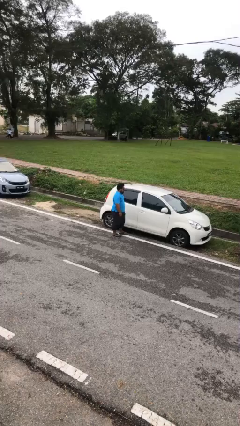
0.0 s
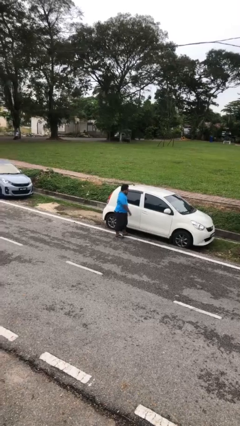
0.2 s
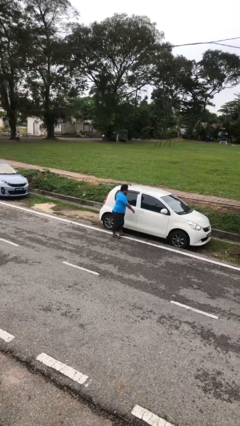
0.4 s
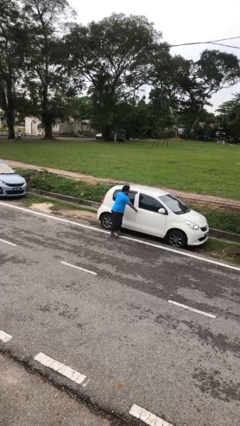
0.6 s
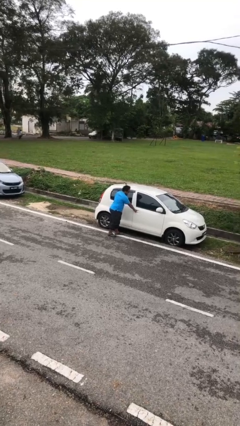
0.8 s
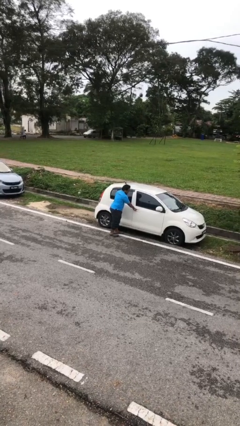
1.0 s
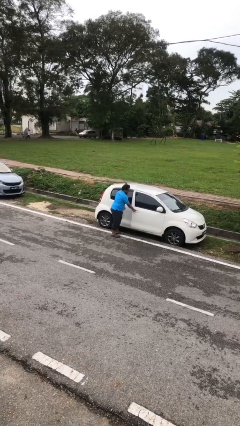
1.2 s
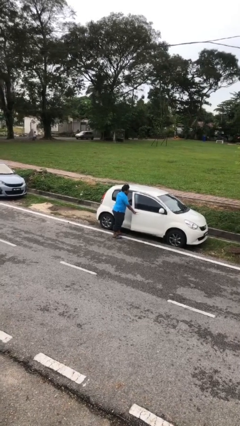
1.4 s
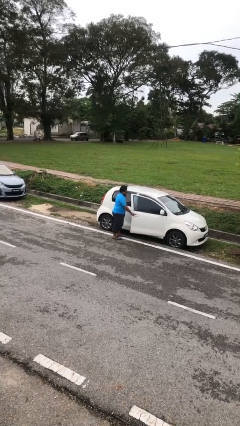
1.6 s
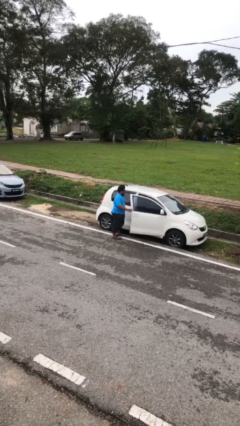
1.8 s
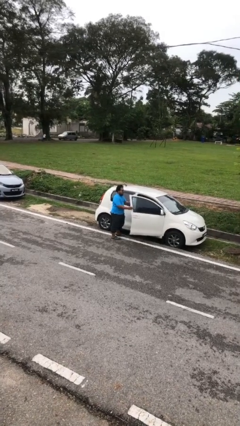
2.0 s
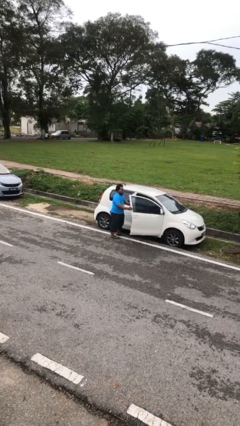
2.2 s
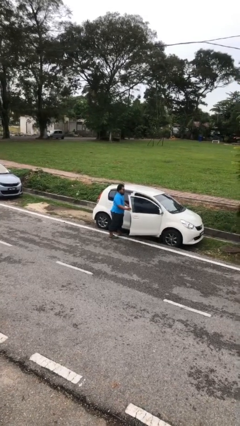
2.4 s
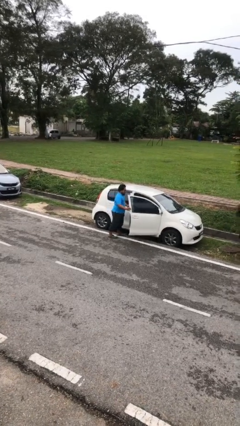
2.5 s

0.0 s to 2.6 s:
person opens car door

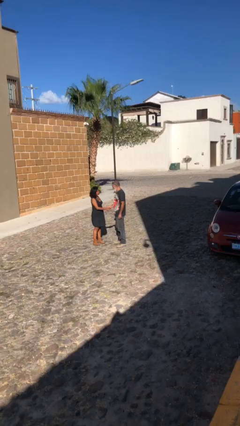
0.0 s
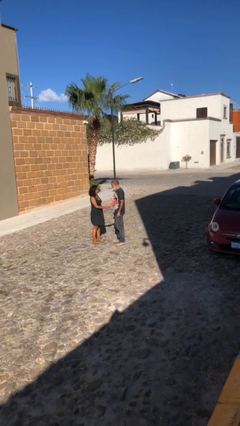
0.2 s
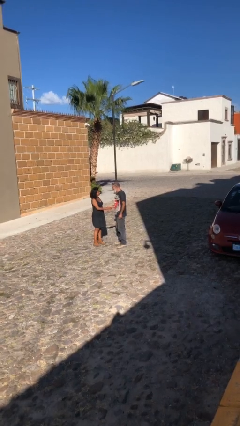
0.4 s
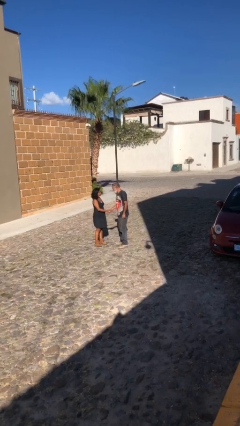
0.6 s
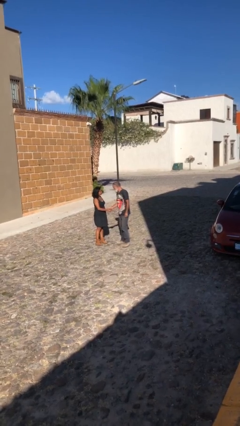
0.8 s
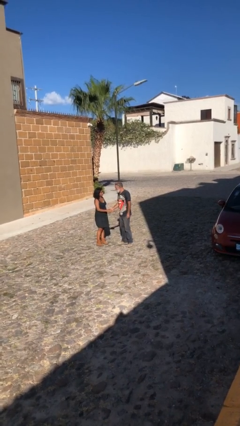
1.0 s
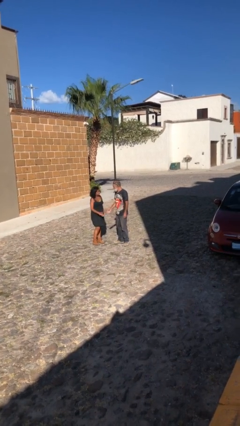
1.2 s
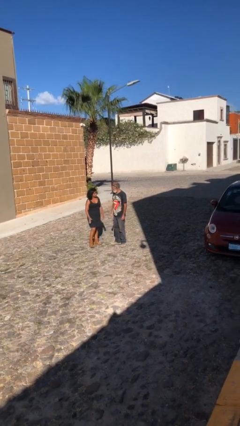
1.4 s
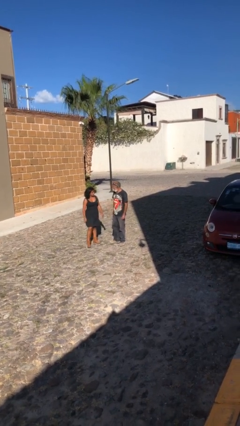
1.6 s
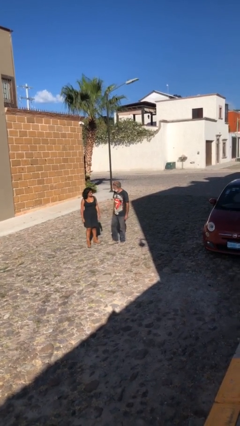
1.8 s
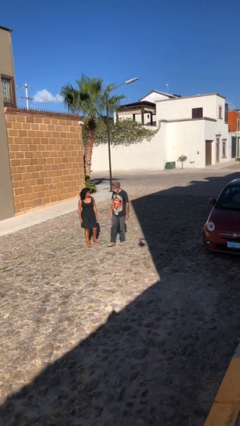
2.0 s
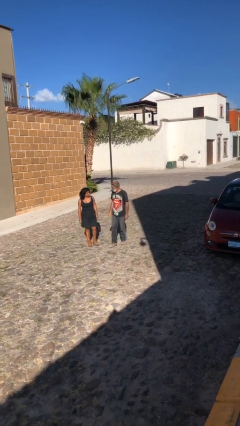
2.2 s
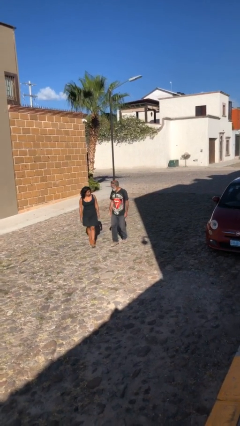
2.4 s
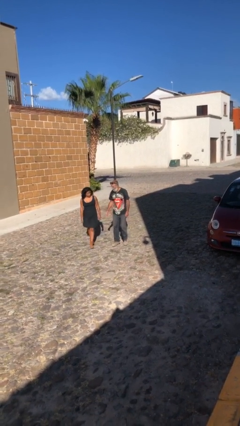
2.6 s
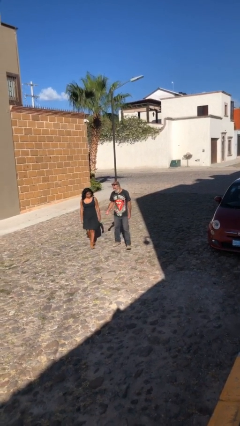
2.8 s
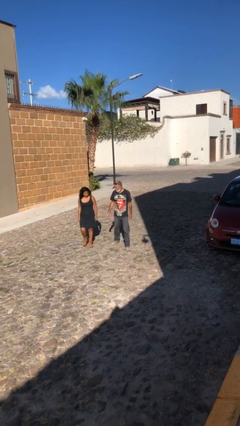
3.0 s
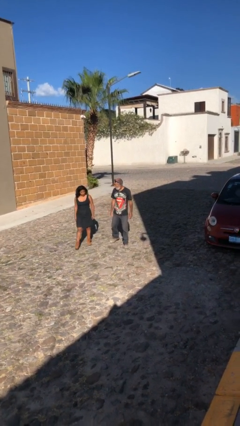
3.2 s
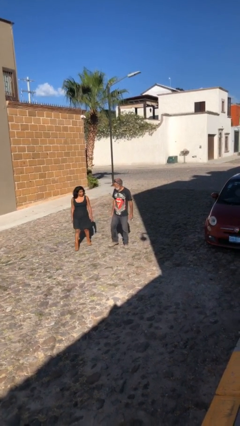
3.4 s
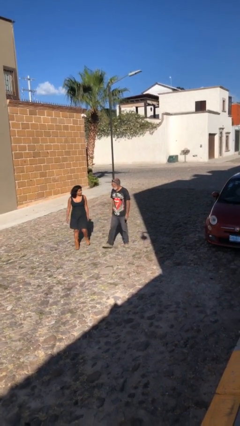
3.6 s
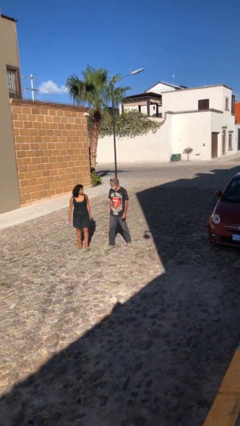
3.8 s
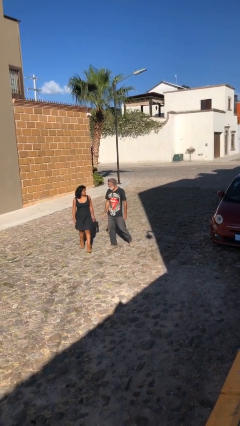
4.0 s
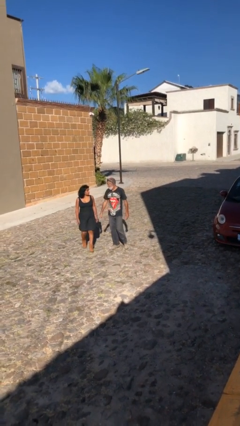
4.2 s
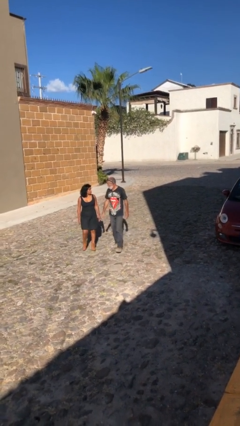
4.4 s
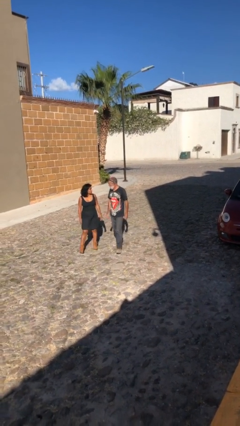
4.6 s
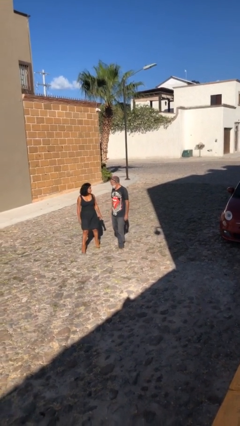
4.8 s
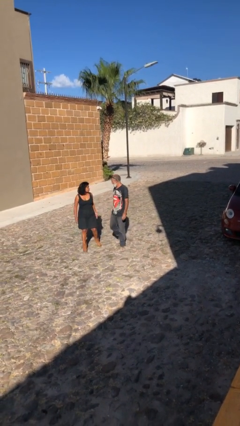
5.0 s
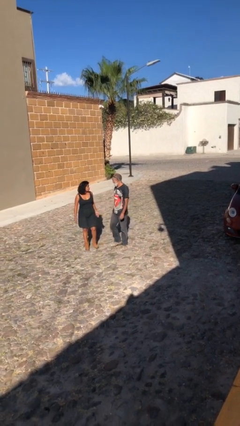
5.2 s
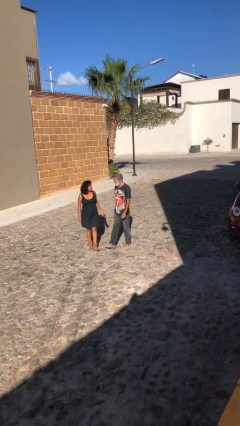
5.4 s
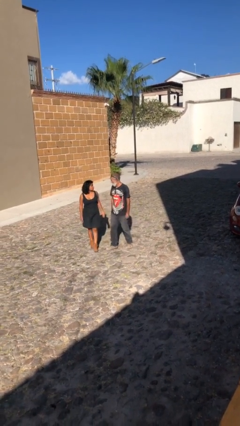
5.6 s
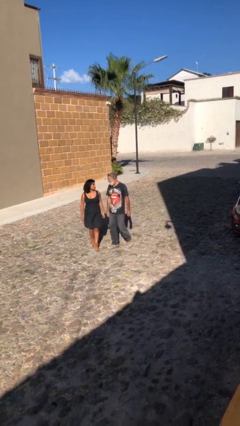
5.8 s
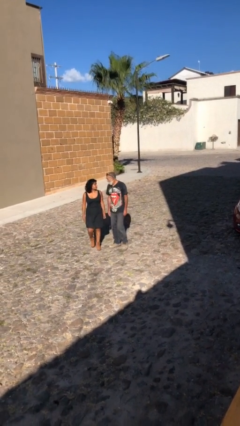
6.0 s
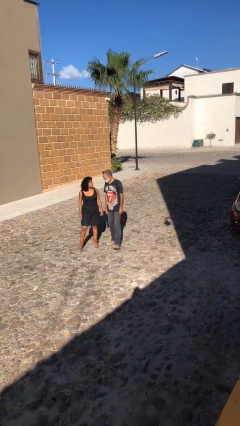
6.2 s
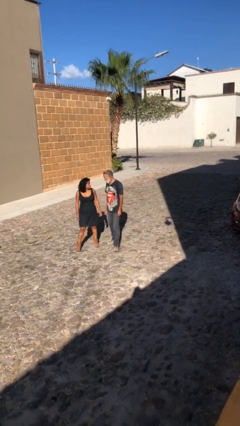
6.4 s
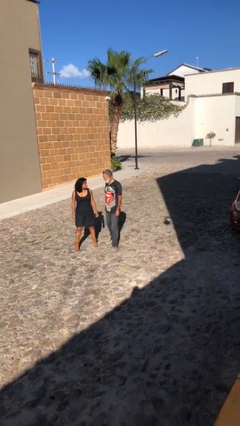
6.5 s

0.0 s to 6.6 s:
person talks to person

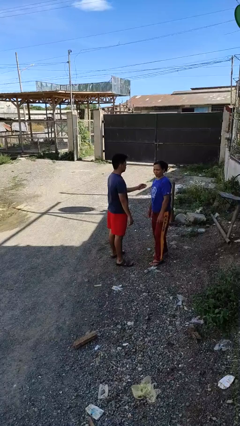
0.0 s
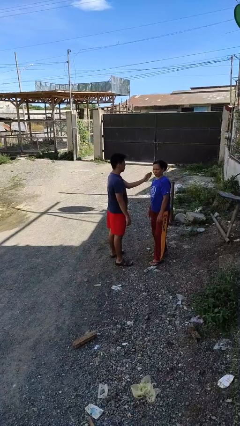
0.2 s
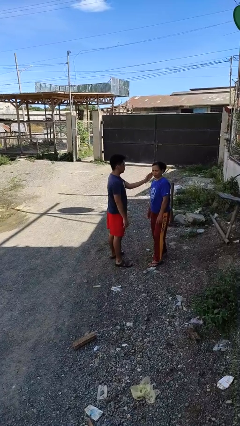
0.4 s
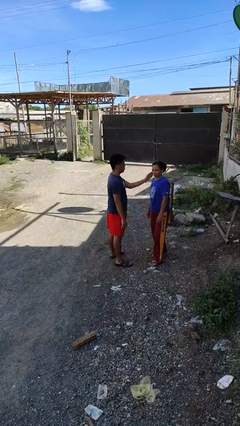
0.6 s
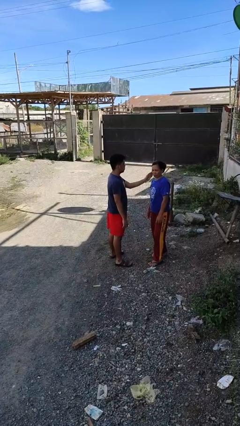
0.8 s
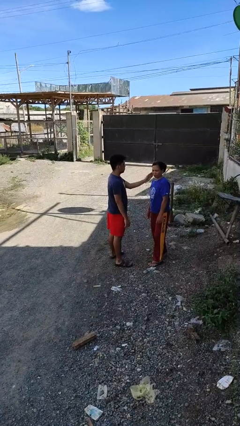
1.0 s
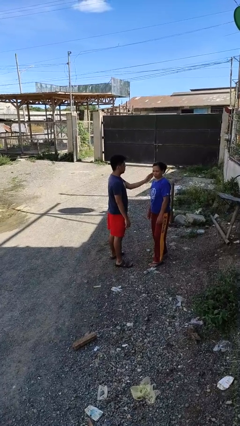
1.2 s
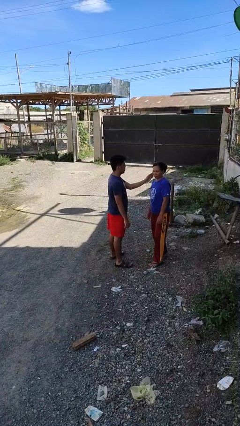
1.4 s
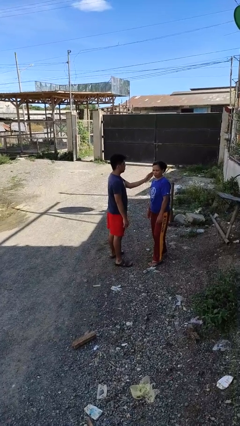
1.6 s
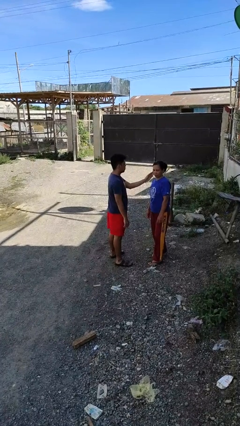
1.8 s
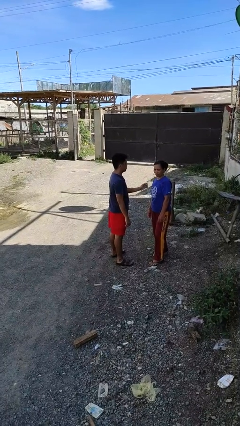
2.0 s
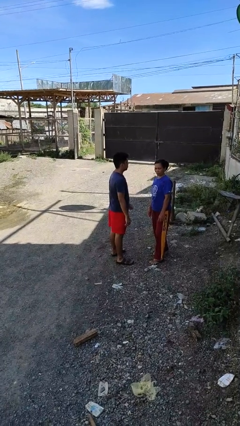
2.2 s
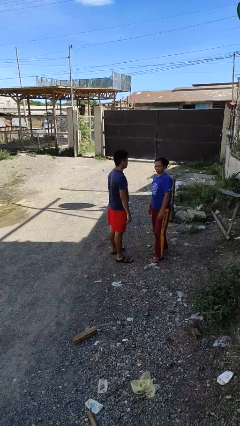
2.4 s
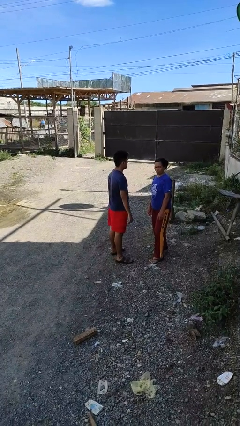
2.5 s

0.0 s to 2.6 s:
person touches face of person

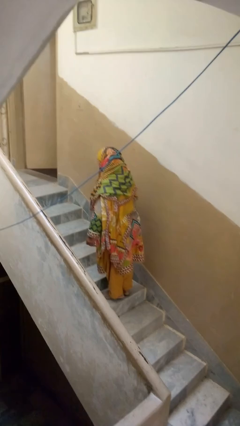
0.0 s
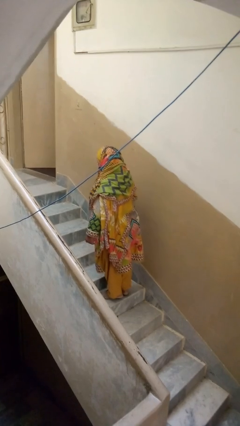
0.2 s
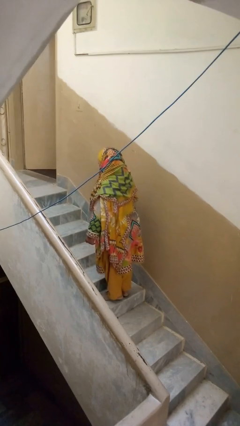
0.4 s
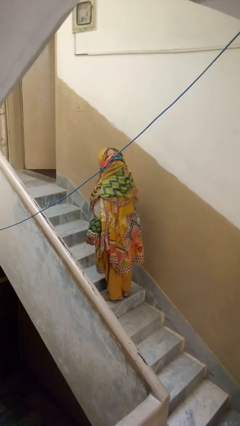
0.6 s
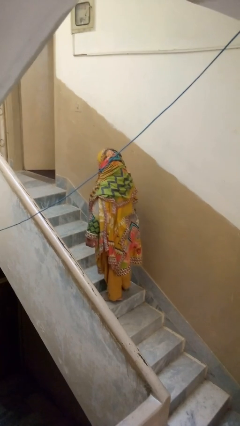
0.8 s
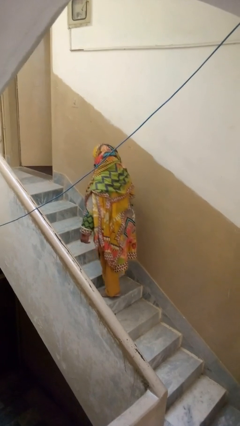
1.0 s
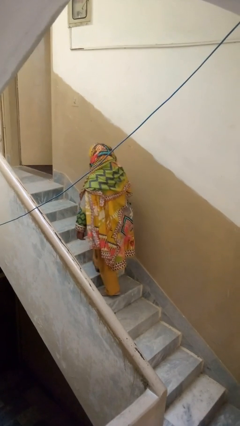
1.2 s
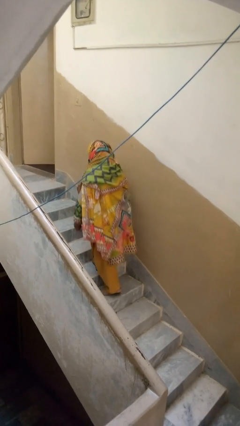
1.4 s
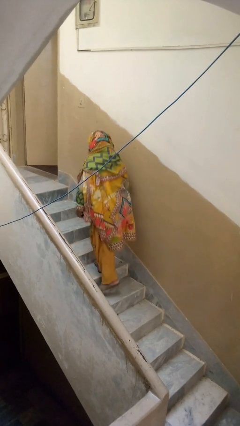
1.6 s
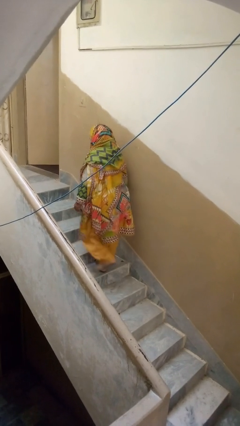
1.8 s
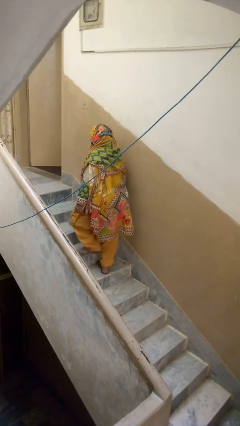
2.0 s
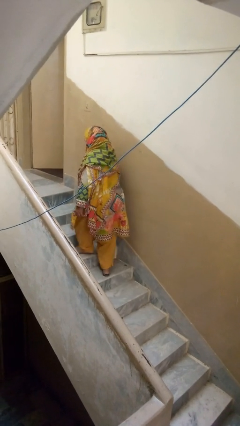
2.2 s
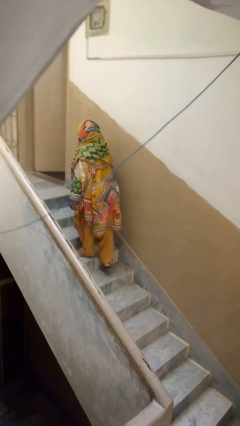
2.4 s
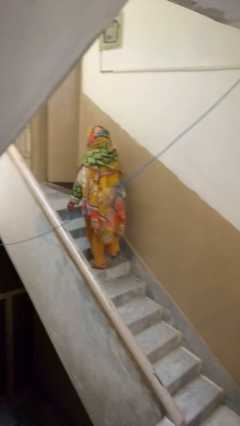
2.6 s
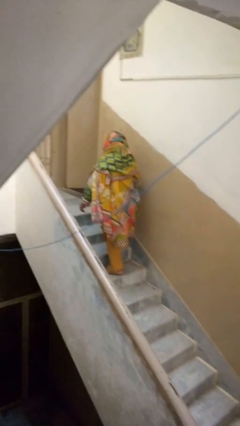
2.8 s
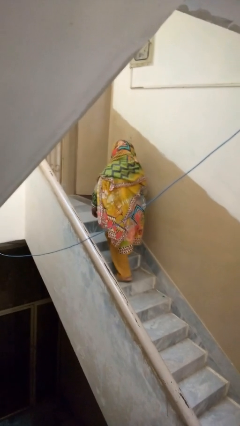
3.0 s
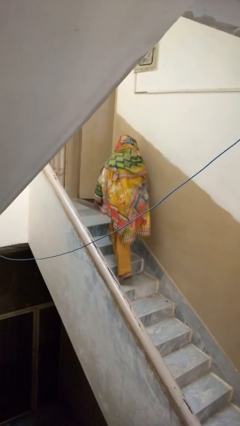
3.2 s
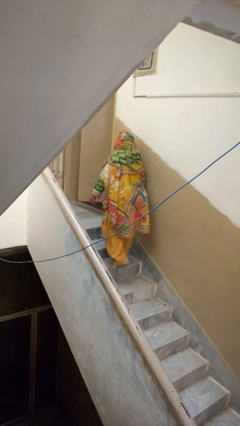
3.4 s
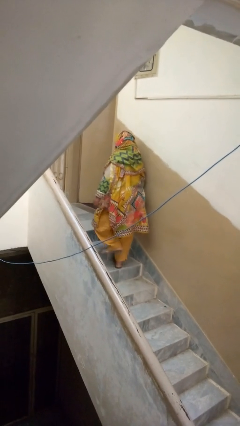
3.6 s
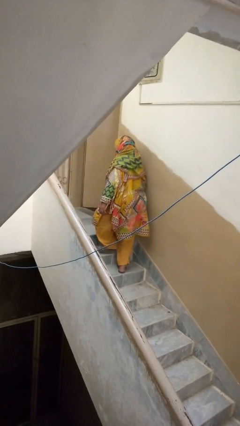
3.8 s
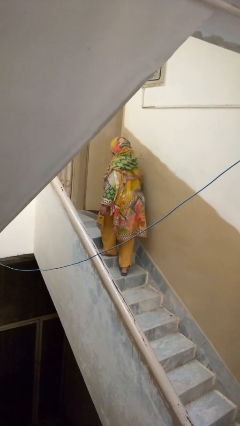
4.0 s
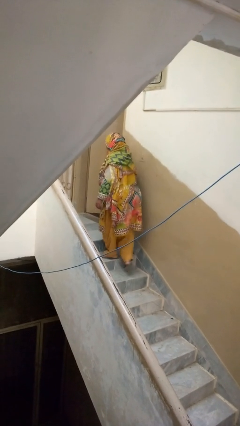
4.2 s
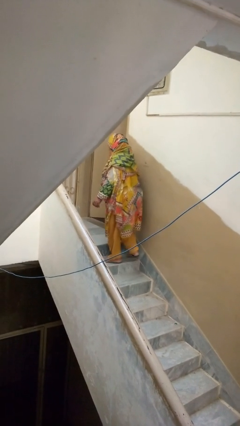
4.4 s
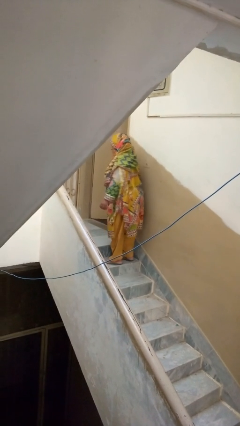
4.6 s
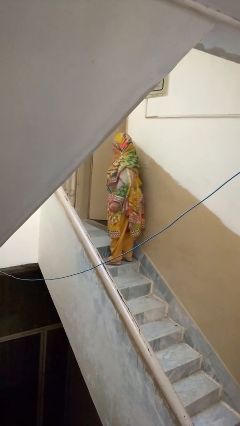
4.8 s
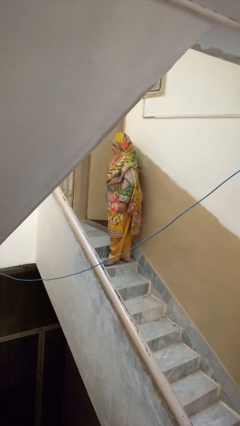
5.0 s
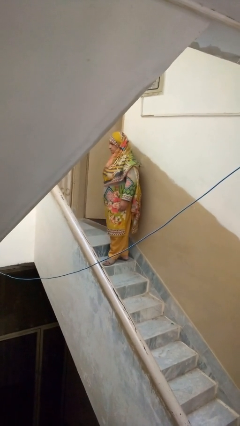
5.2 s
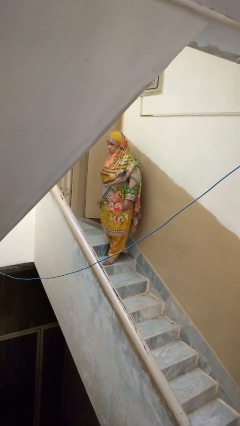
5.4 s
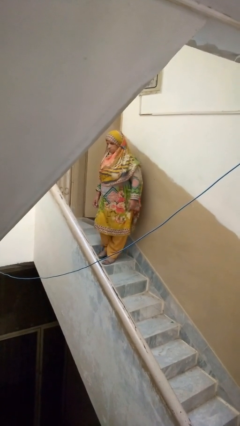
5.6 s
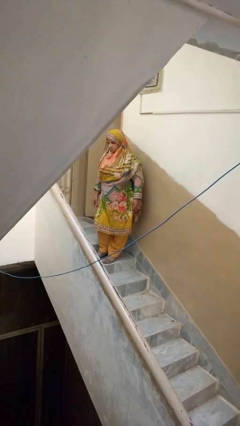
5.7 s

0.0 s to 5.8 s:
person climbs up stairs
